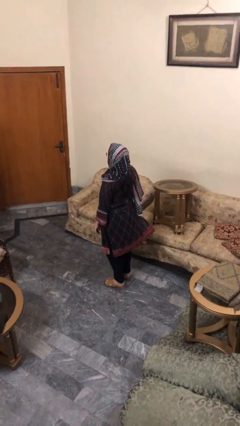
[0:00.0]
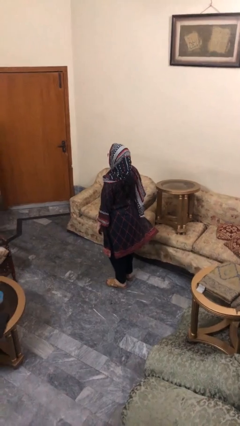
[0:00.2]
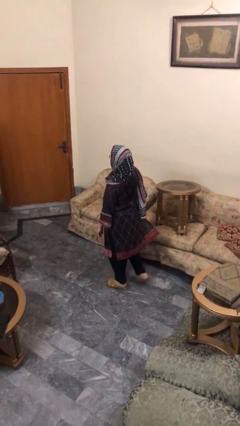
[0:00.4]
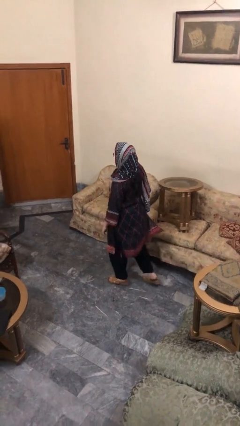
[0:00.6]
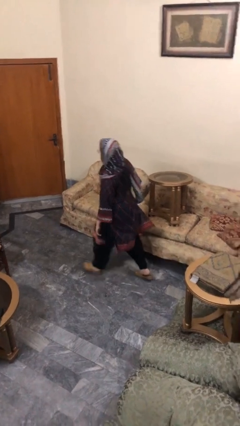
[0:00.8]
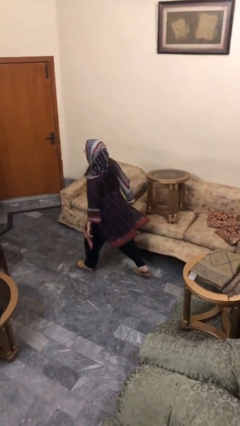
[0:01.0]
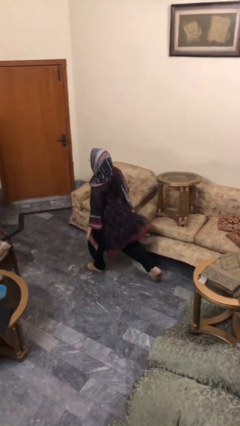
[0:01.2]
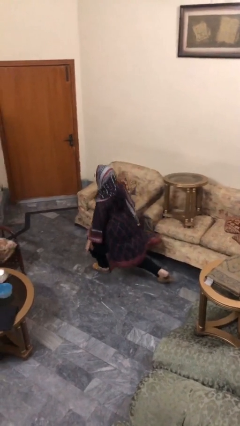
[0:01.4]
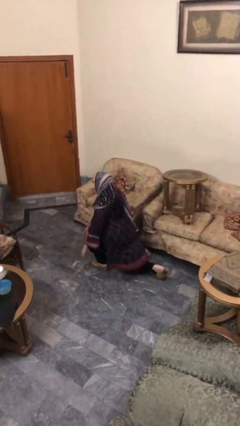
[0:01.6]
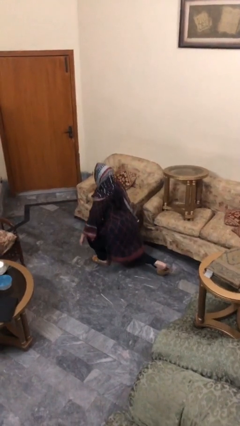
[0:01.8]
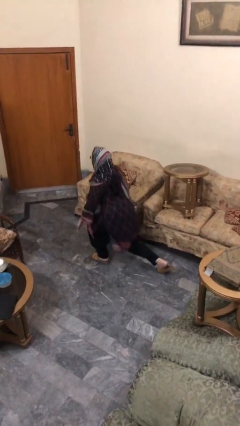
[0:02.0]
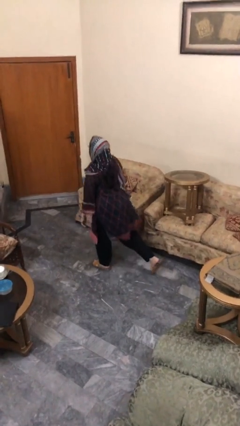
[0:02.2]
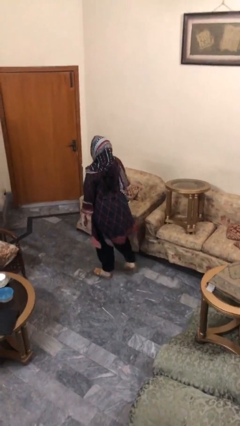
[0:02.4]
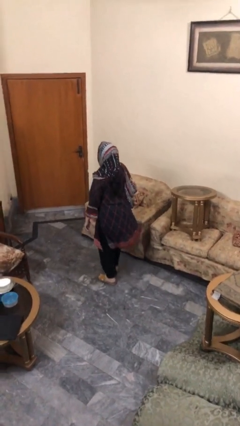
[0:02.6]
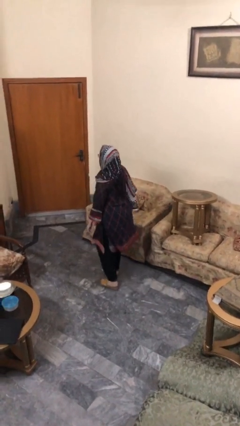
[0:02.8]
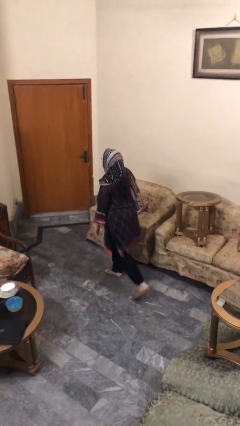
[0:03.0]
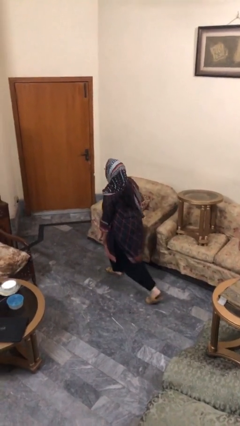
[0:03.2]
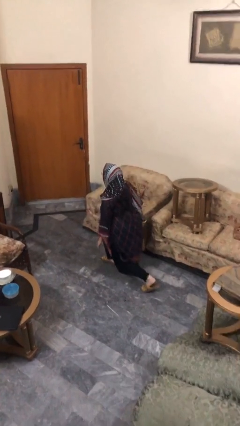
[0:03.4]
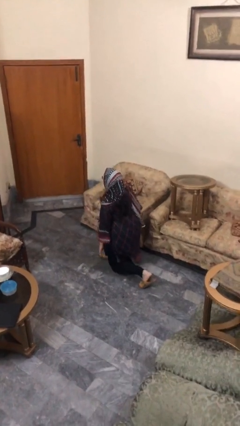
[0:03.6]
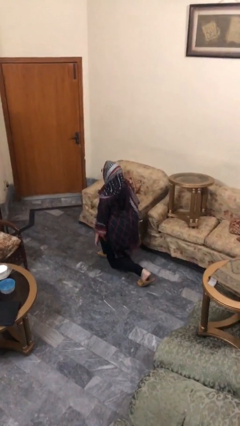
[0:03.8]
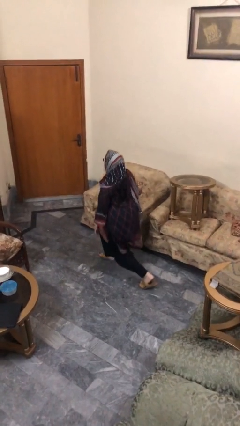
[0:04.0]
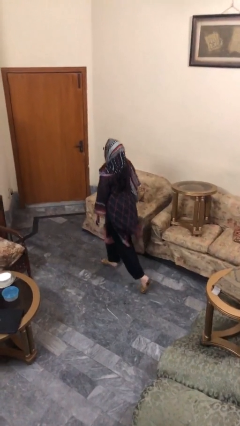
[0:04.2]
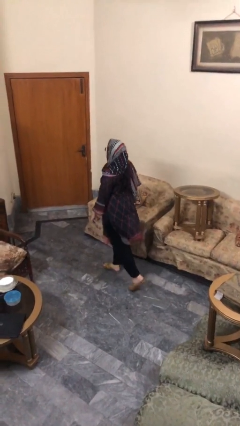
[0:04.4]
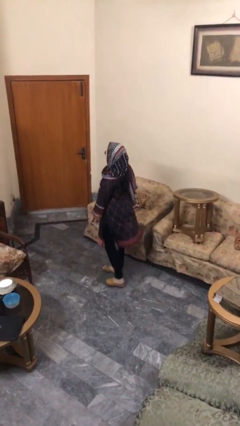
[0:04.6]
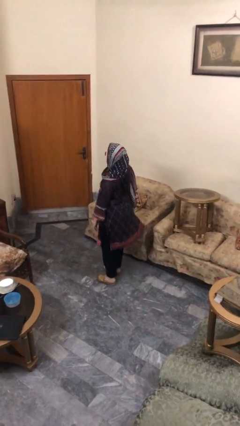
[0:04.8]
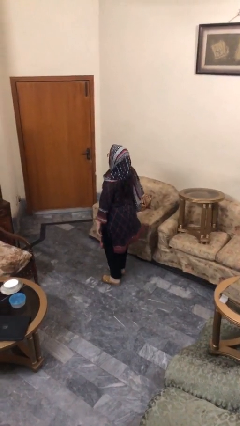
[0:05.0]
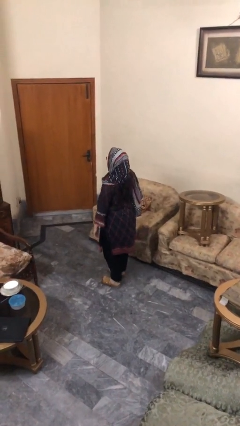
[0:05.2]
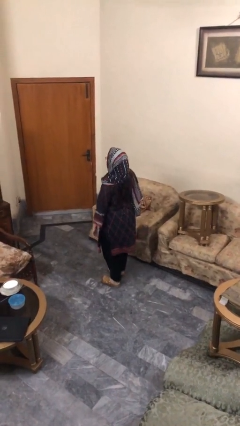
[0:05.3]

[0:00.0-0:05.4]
person exercises with lunges

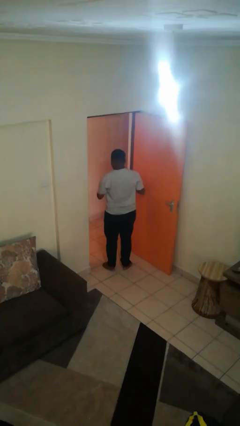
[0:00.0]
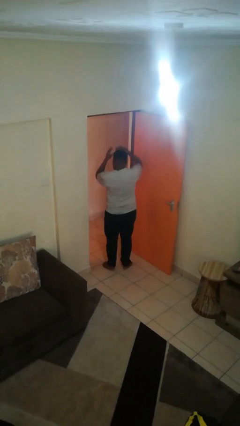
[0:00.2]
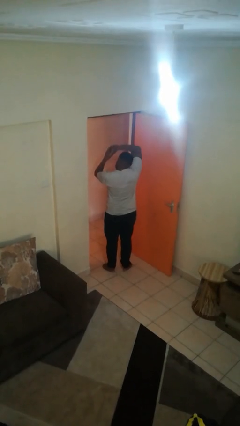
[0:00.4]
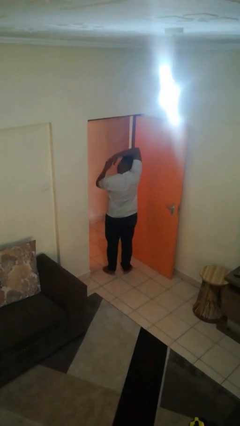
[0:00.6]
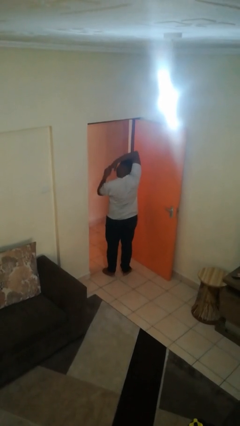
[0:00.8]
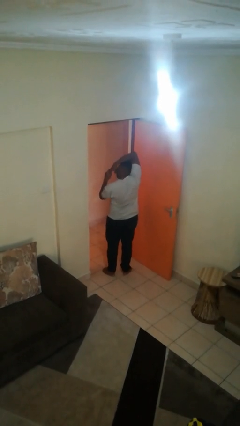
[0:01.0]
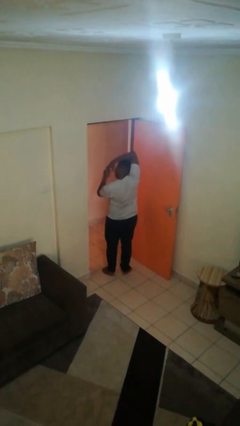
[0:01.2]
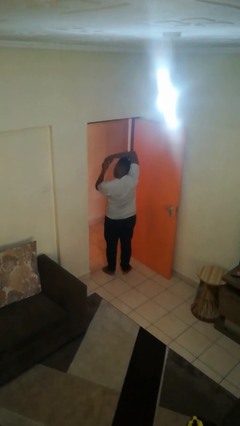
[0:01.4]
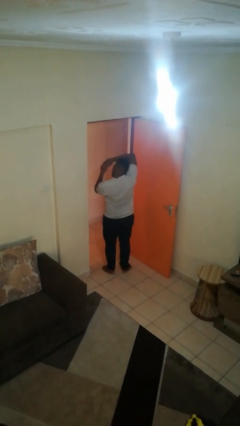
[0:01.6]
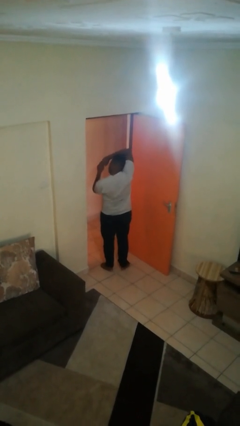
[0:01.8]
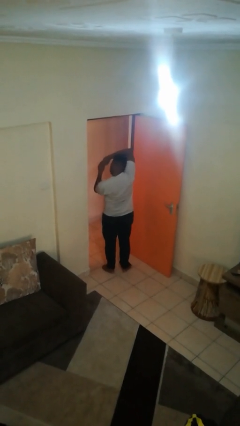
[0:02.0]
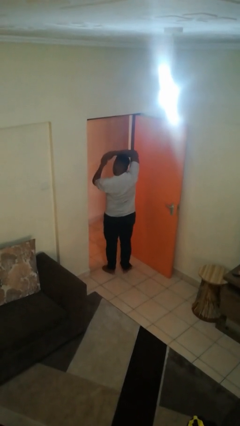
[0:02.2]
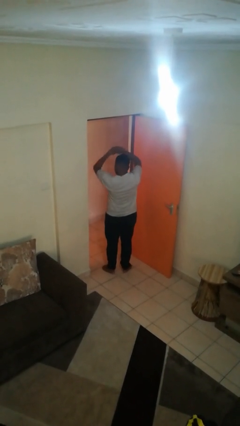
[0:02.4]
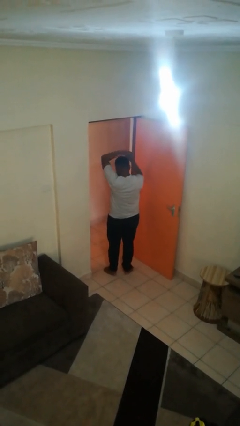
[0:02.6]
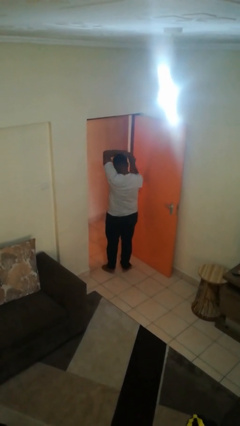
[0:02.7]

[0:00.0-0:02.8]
person stretches arms over head

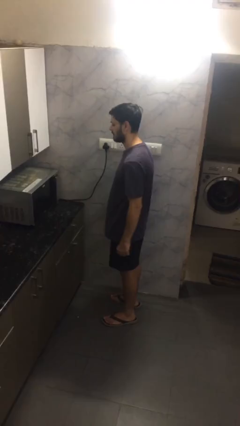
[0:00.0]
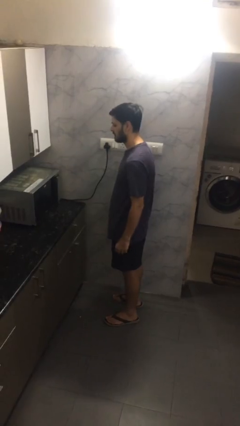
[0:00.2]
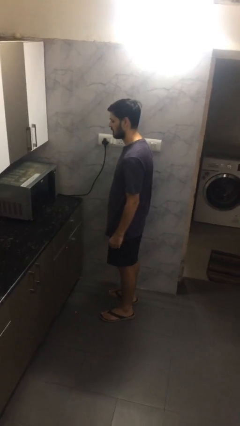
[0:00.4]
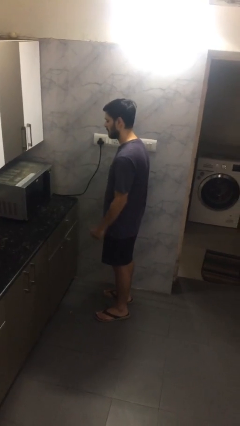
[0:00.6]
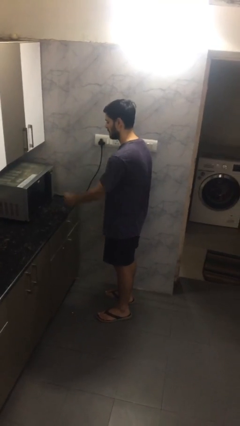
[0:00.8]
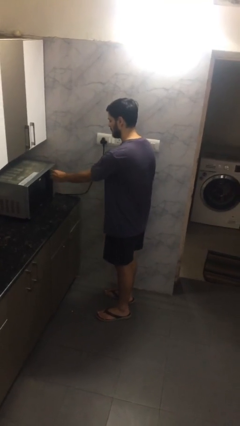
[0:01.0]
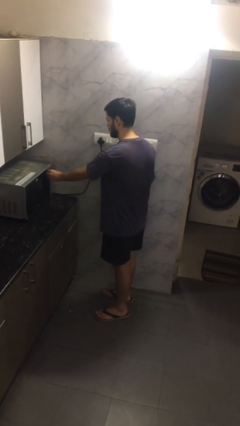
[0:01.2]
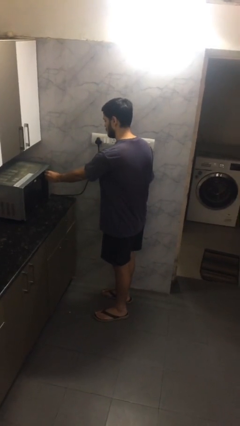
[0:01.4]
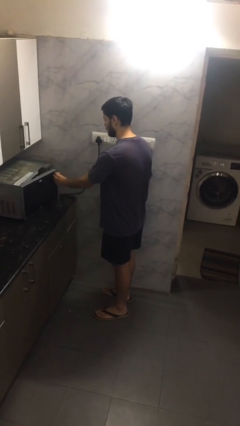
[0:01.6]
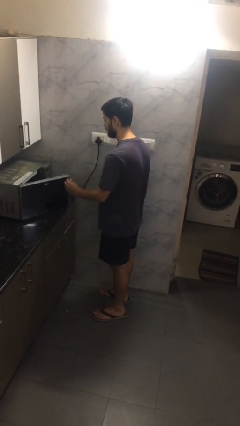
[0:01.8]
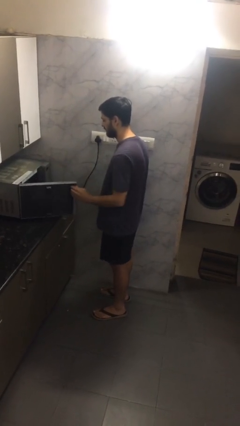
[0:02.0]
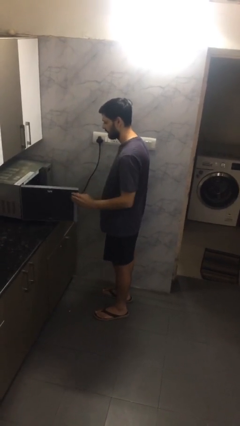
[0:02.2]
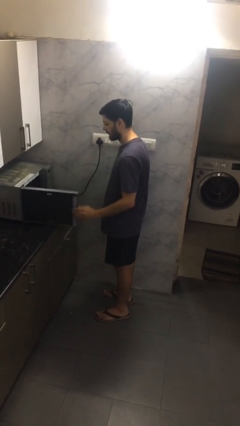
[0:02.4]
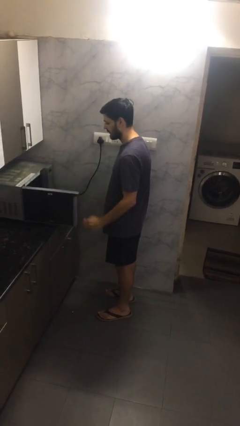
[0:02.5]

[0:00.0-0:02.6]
person opens microwave

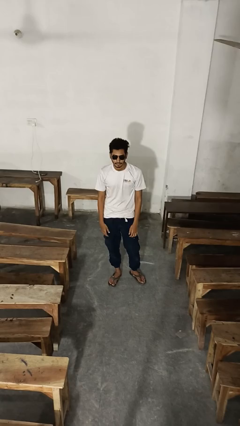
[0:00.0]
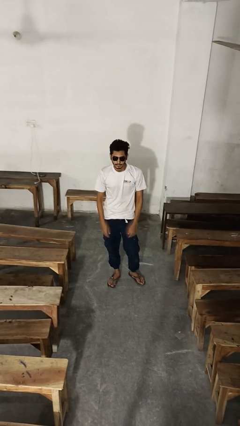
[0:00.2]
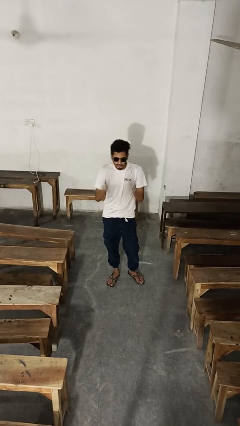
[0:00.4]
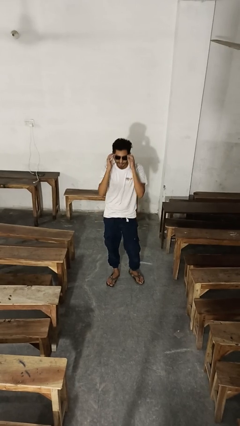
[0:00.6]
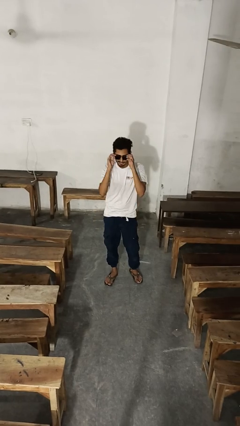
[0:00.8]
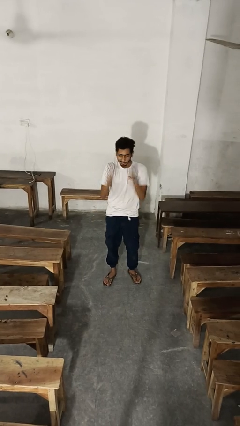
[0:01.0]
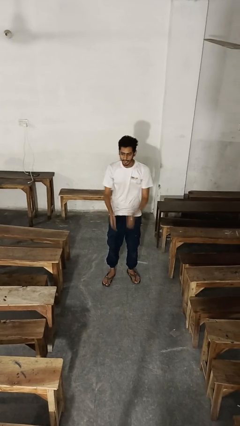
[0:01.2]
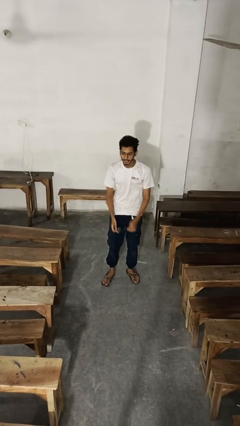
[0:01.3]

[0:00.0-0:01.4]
person takes off sunglasses

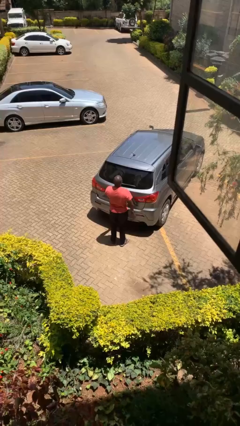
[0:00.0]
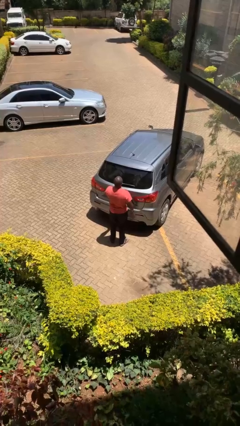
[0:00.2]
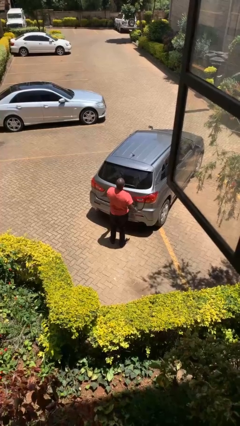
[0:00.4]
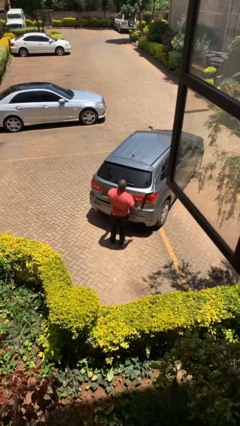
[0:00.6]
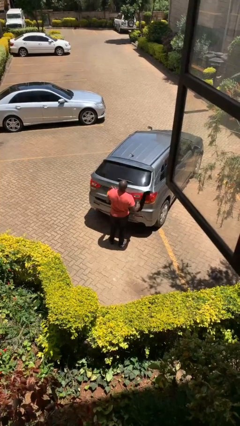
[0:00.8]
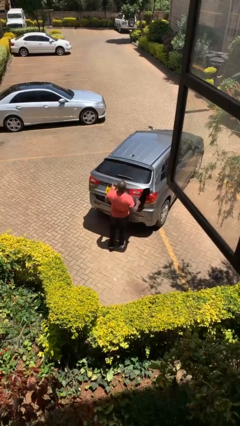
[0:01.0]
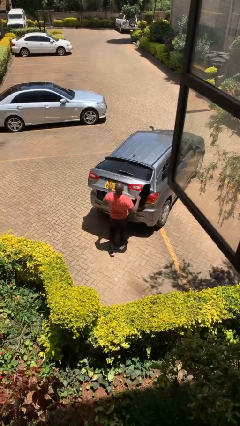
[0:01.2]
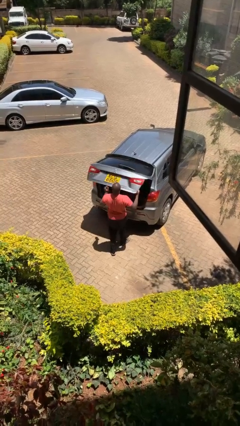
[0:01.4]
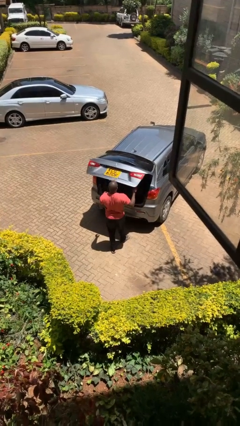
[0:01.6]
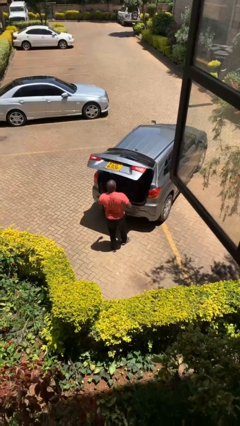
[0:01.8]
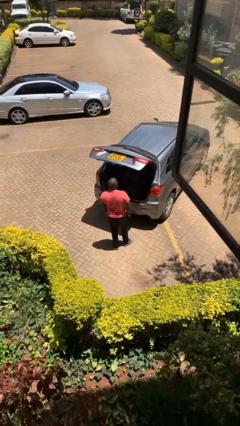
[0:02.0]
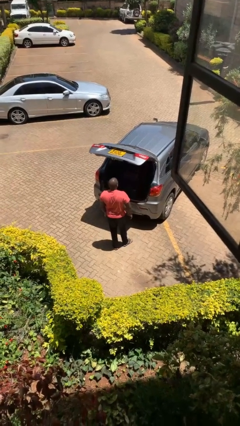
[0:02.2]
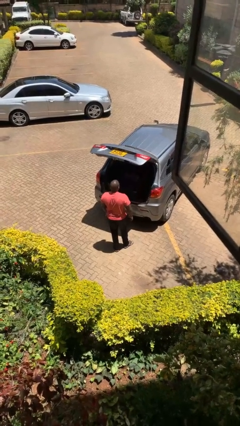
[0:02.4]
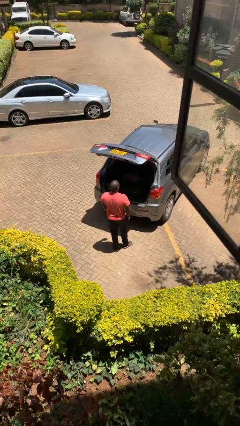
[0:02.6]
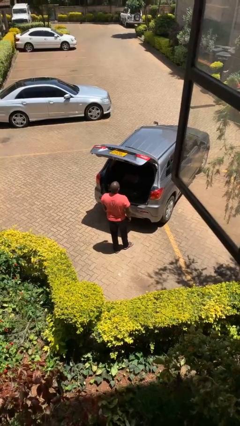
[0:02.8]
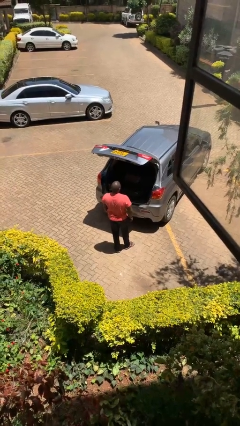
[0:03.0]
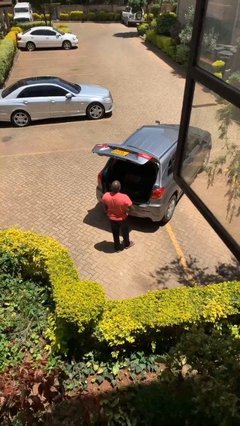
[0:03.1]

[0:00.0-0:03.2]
person opens car trunk

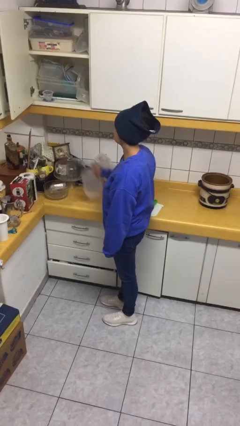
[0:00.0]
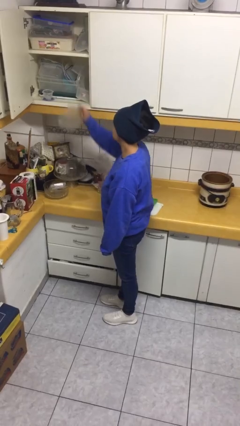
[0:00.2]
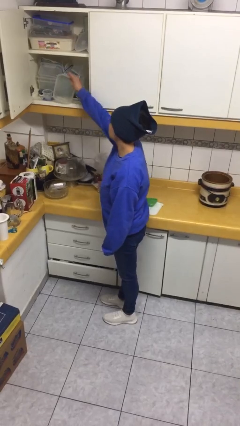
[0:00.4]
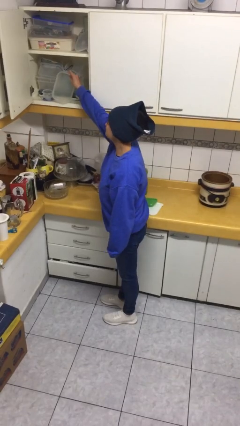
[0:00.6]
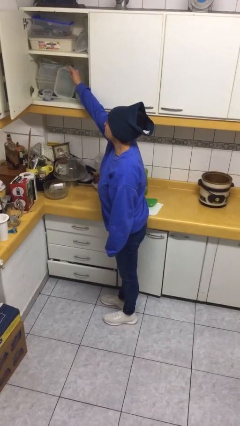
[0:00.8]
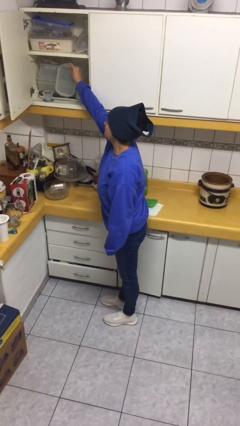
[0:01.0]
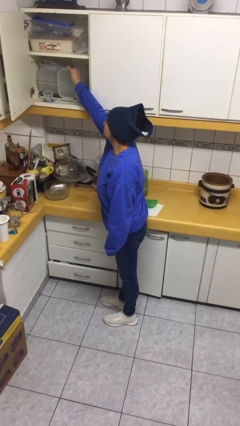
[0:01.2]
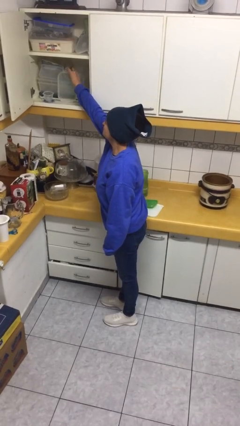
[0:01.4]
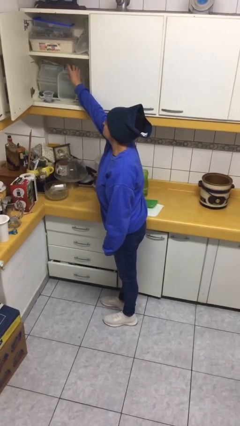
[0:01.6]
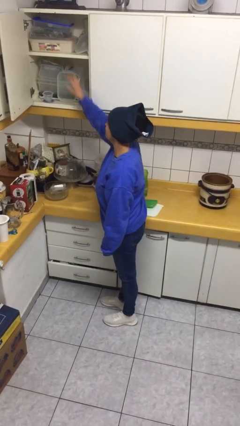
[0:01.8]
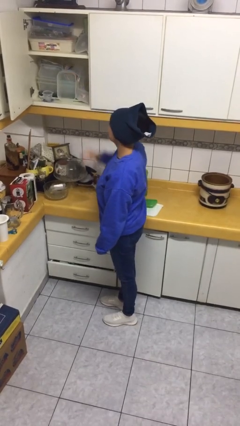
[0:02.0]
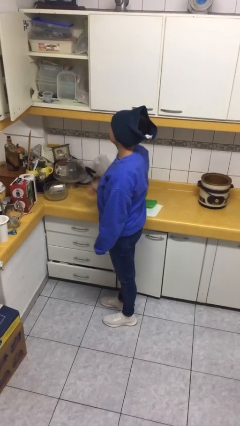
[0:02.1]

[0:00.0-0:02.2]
person puts object in cabinet
